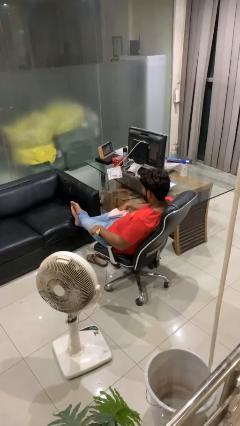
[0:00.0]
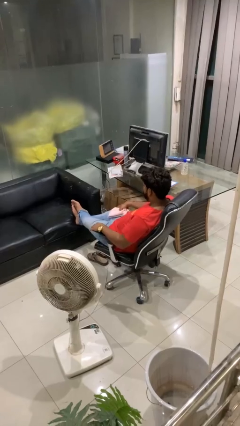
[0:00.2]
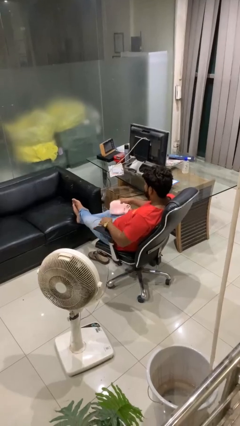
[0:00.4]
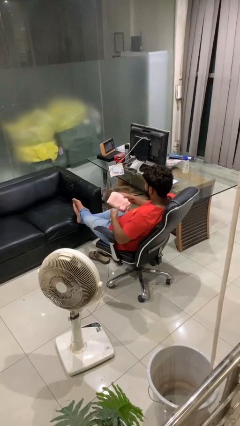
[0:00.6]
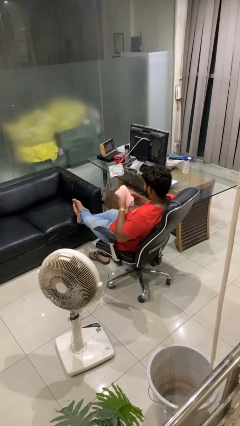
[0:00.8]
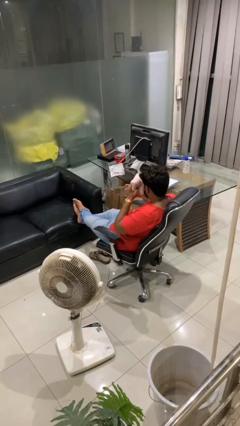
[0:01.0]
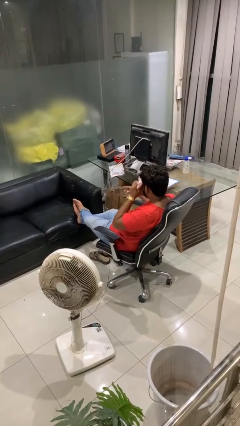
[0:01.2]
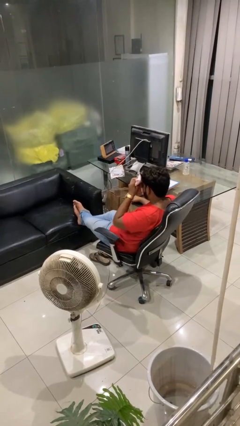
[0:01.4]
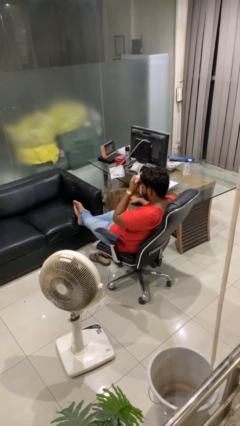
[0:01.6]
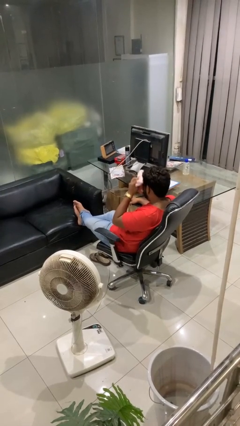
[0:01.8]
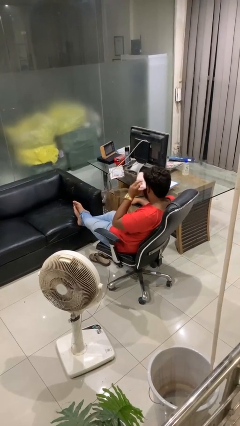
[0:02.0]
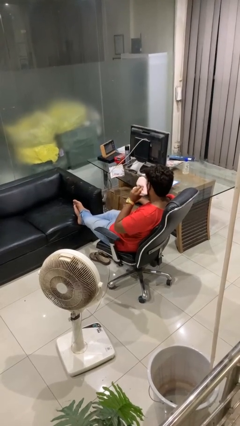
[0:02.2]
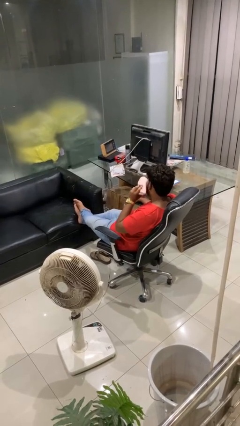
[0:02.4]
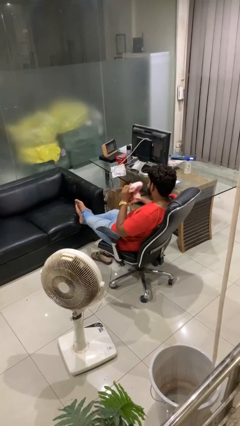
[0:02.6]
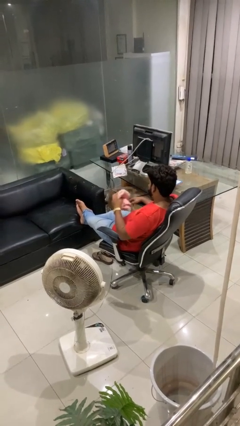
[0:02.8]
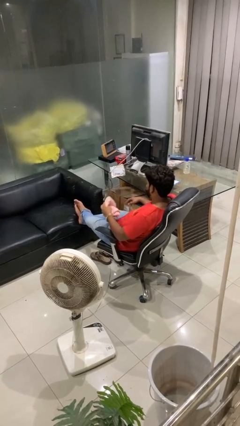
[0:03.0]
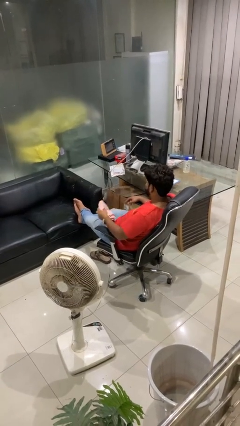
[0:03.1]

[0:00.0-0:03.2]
person wipes mouth with napkin

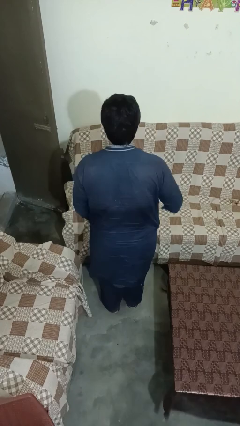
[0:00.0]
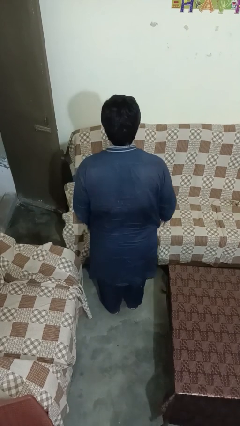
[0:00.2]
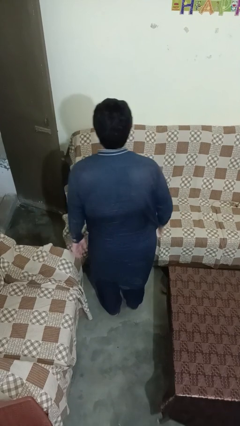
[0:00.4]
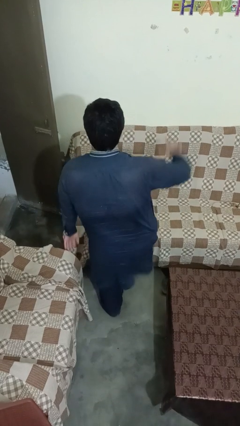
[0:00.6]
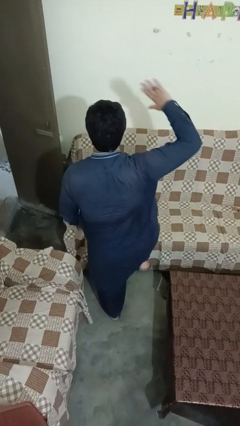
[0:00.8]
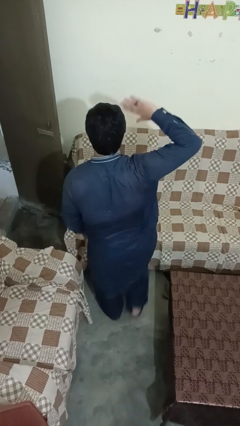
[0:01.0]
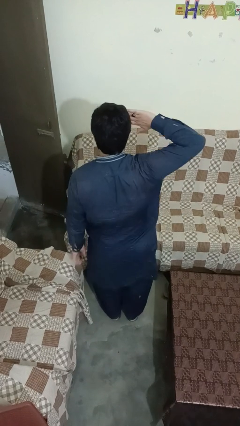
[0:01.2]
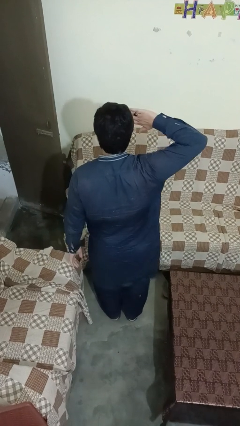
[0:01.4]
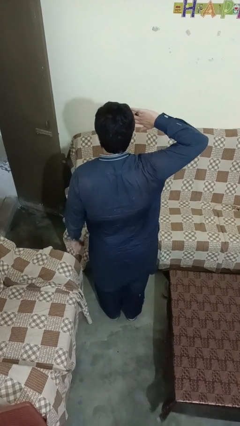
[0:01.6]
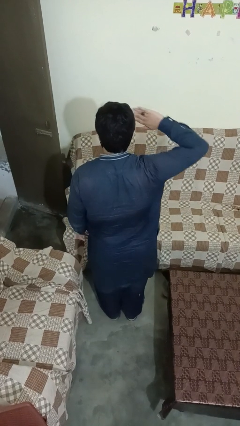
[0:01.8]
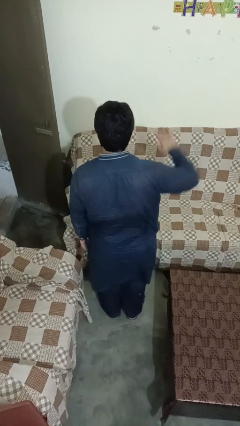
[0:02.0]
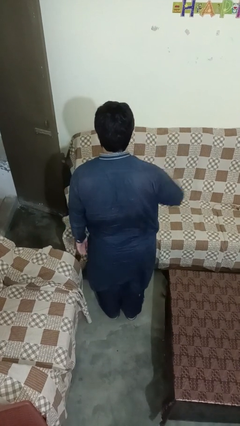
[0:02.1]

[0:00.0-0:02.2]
person salutes

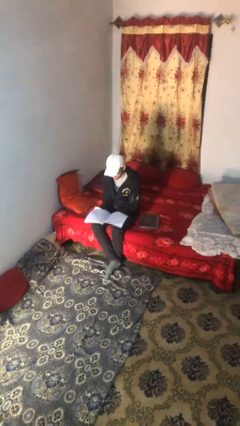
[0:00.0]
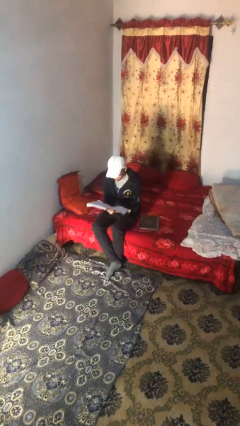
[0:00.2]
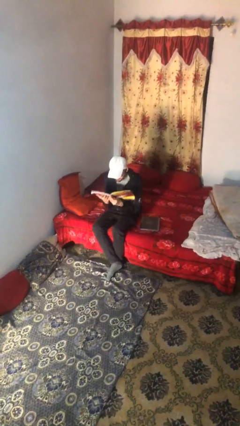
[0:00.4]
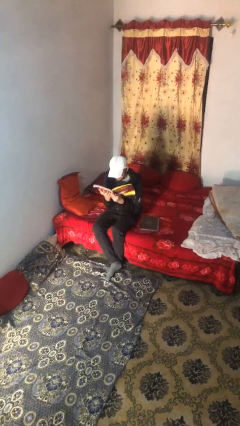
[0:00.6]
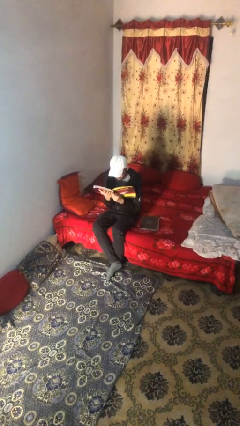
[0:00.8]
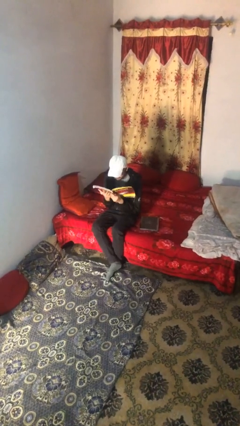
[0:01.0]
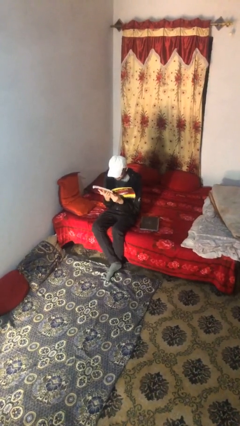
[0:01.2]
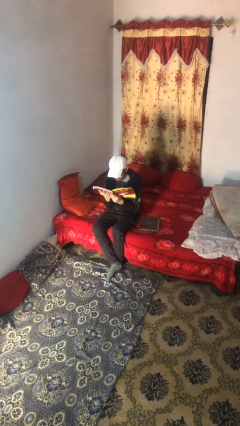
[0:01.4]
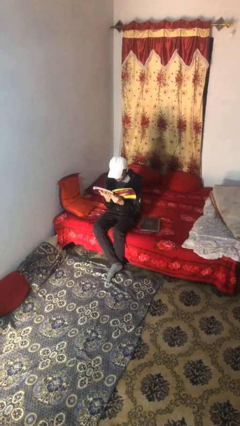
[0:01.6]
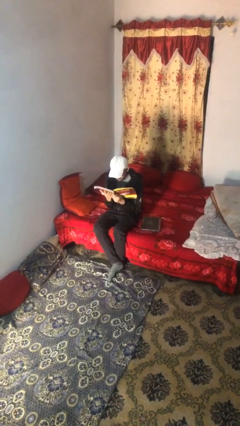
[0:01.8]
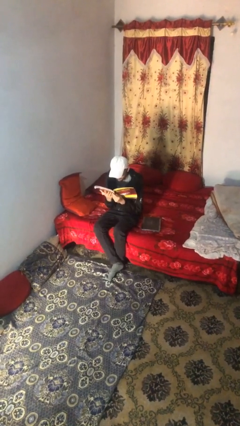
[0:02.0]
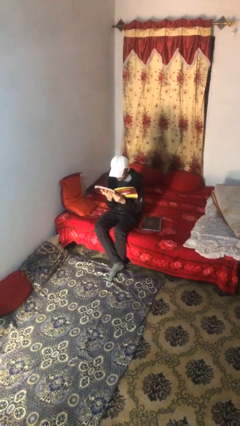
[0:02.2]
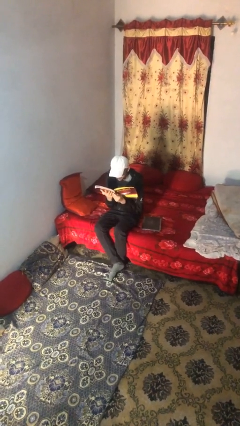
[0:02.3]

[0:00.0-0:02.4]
person reads document

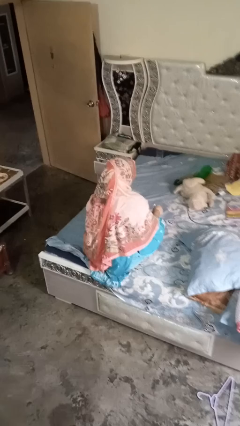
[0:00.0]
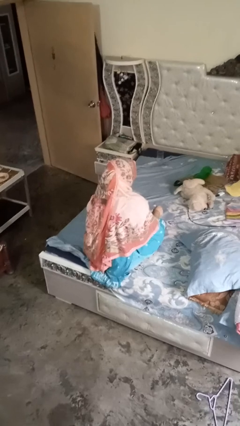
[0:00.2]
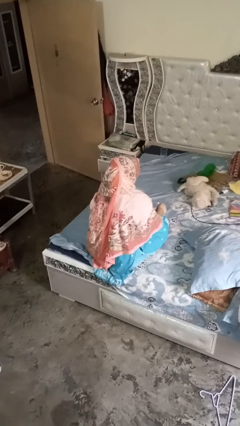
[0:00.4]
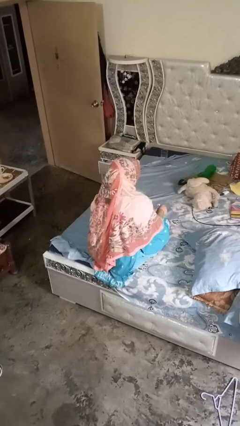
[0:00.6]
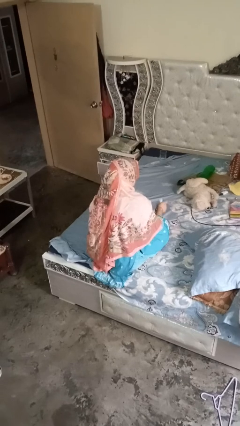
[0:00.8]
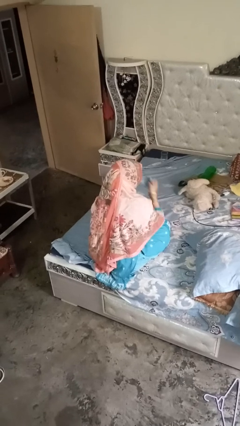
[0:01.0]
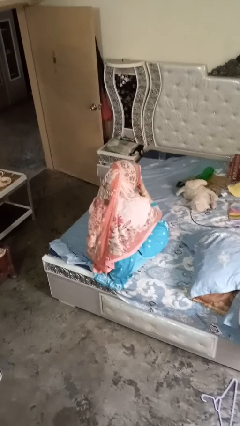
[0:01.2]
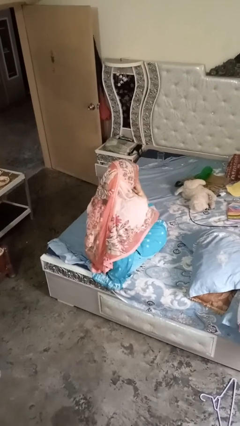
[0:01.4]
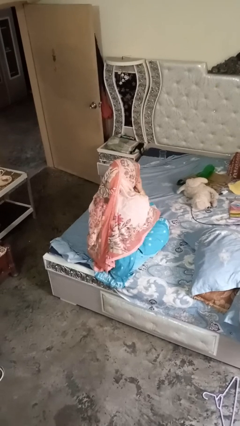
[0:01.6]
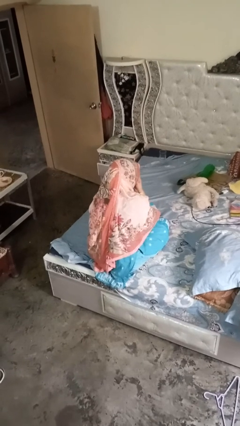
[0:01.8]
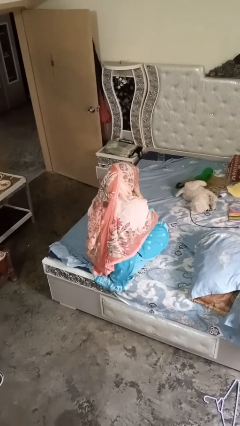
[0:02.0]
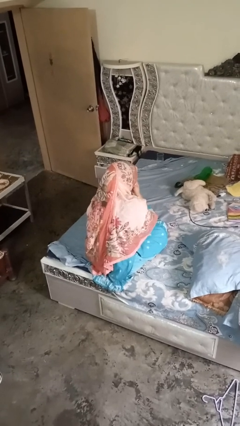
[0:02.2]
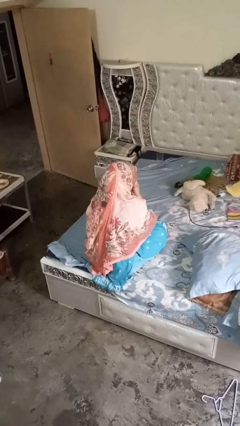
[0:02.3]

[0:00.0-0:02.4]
person blows nose

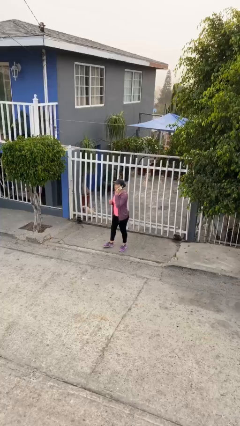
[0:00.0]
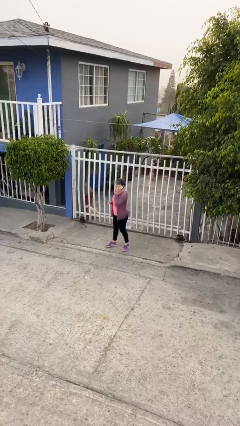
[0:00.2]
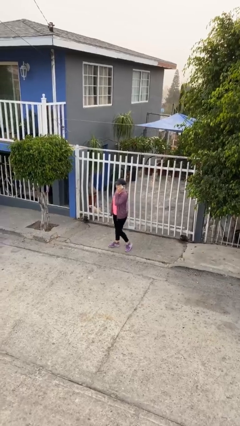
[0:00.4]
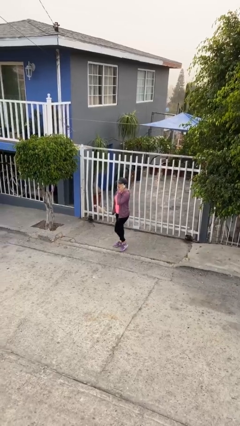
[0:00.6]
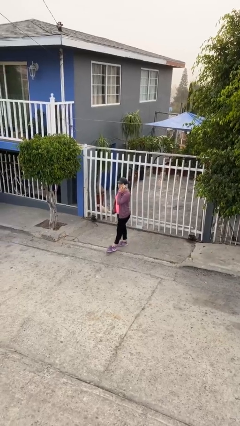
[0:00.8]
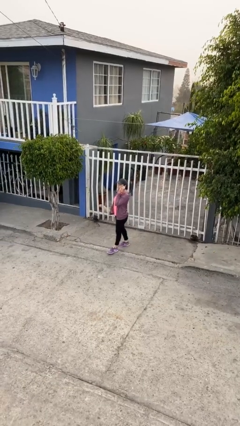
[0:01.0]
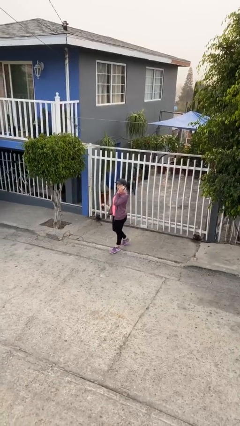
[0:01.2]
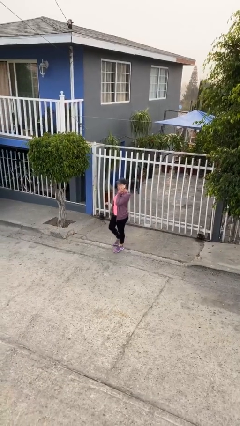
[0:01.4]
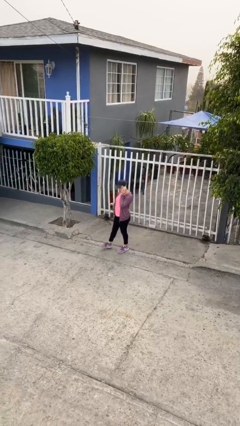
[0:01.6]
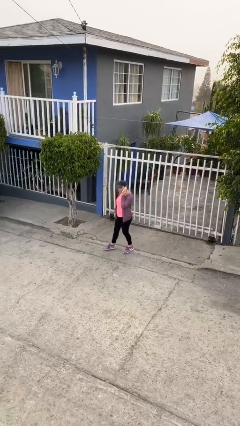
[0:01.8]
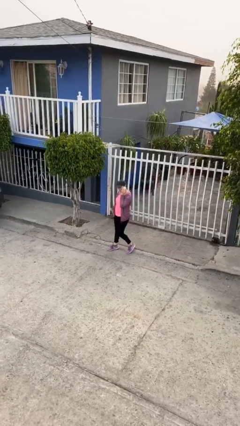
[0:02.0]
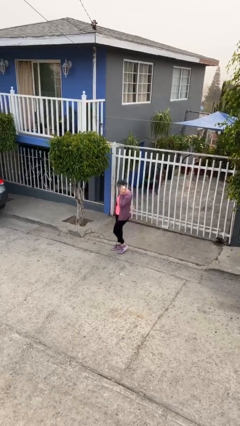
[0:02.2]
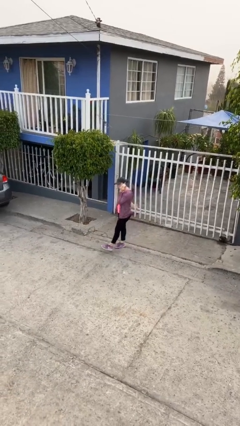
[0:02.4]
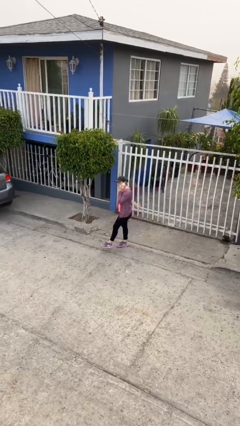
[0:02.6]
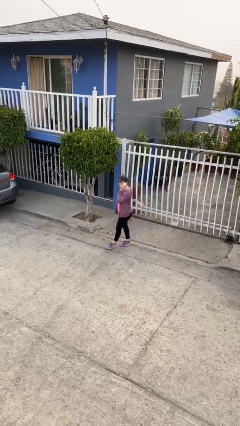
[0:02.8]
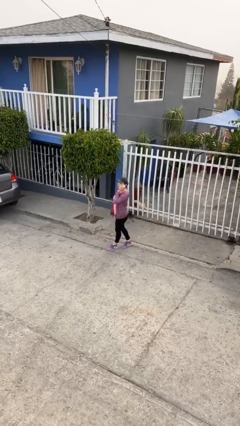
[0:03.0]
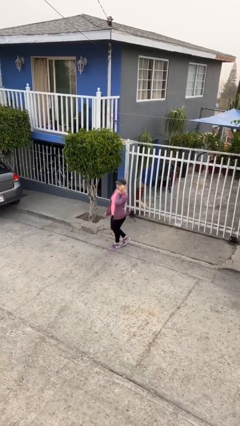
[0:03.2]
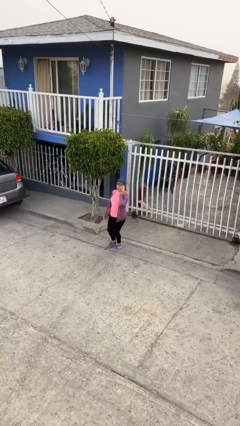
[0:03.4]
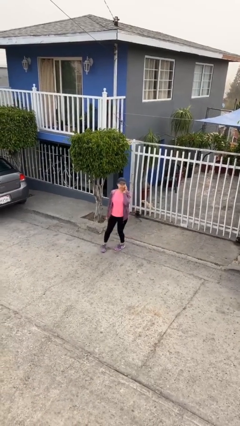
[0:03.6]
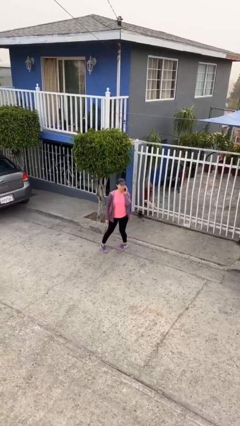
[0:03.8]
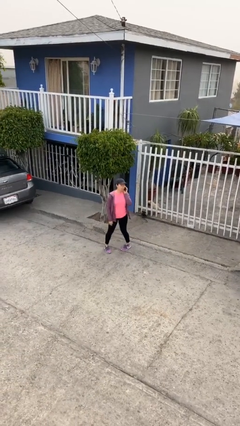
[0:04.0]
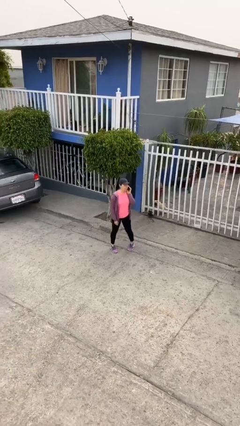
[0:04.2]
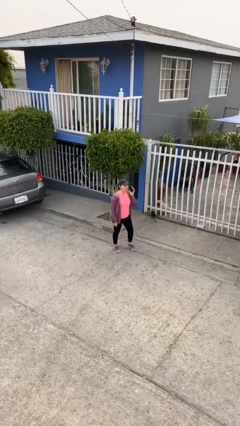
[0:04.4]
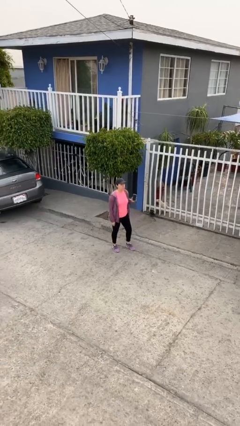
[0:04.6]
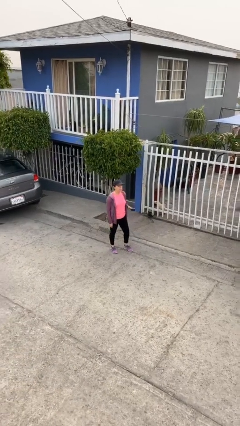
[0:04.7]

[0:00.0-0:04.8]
person talks on phone

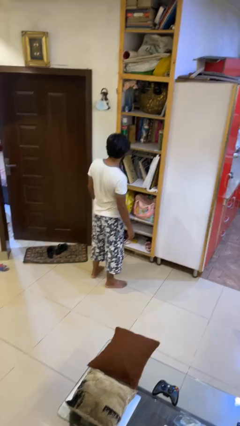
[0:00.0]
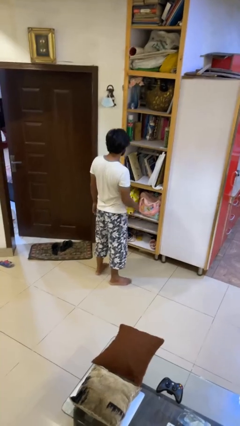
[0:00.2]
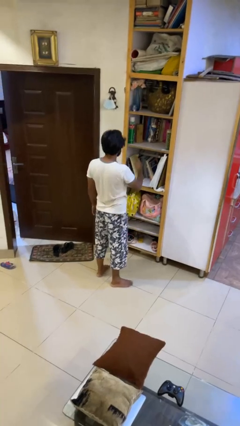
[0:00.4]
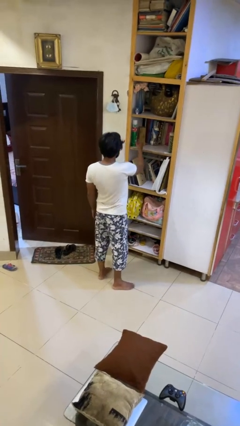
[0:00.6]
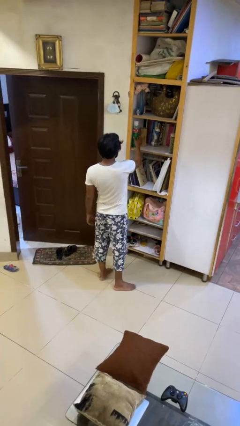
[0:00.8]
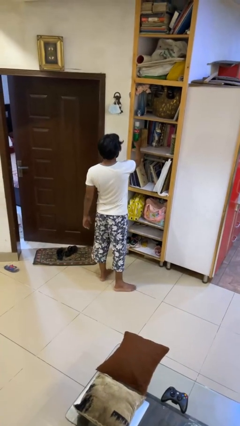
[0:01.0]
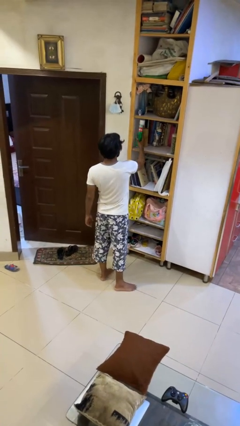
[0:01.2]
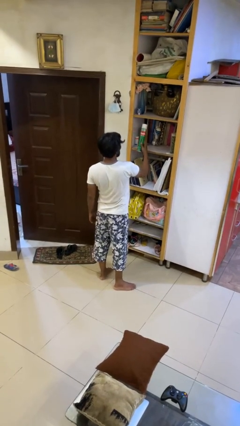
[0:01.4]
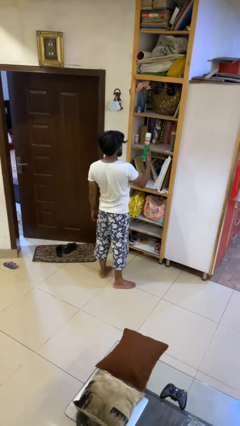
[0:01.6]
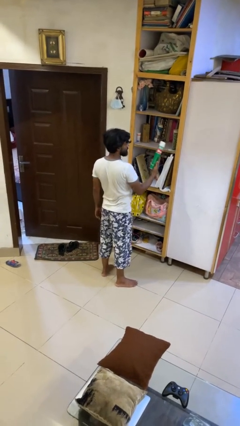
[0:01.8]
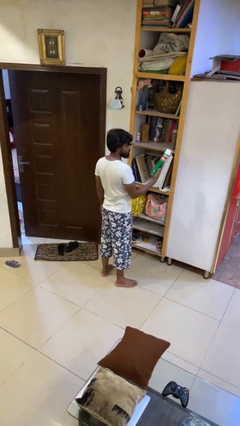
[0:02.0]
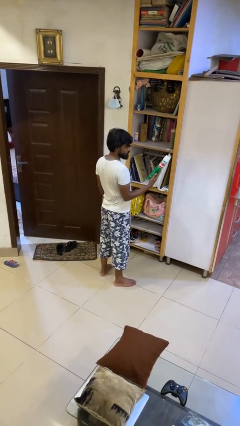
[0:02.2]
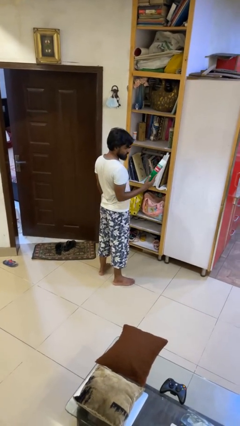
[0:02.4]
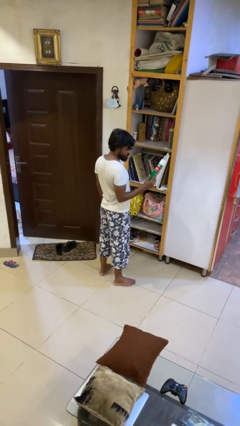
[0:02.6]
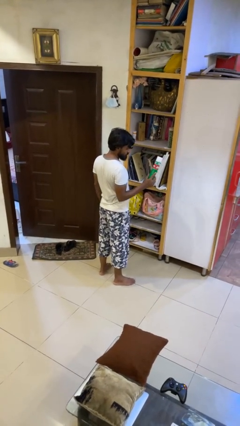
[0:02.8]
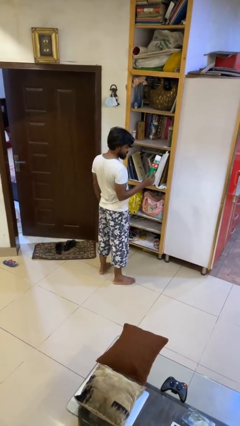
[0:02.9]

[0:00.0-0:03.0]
person picks up object from cabinet
